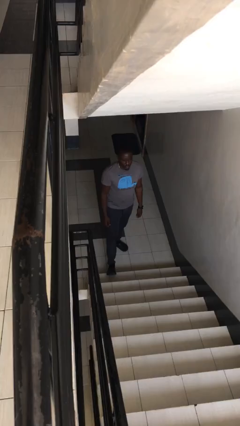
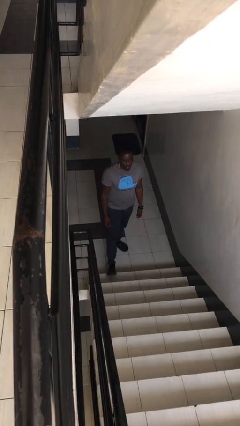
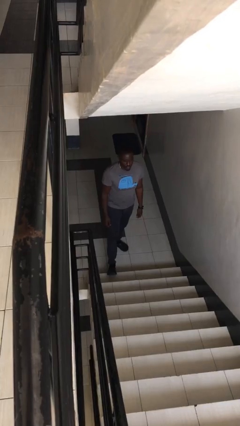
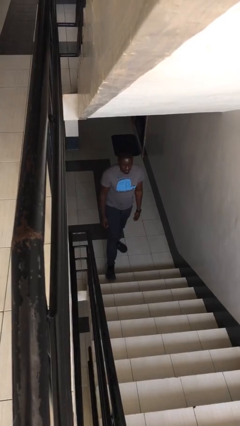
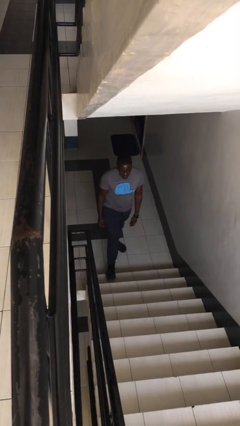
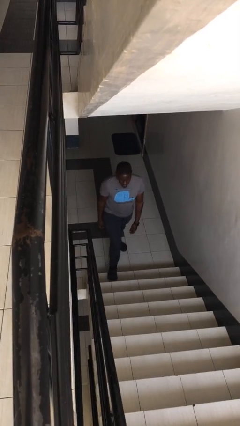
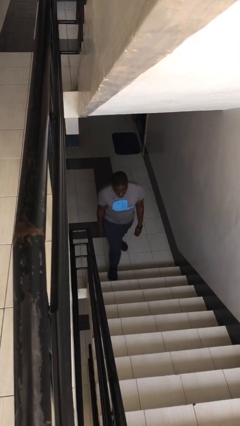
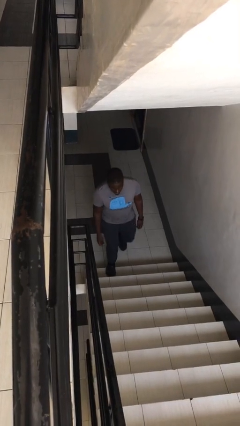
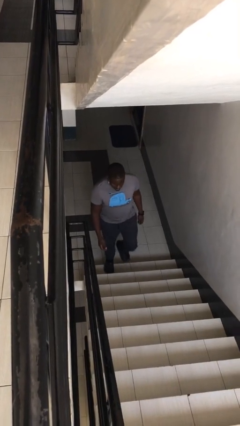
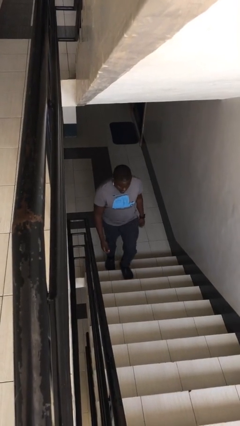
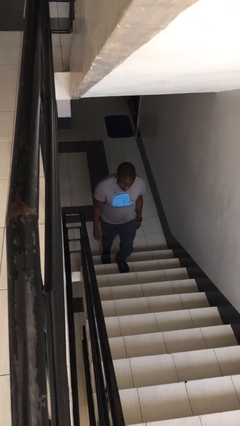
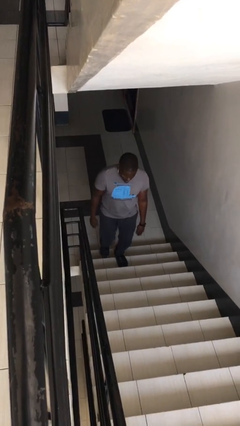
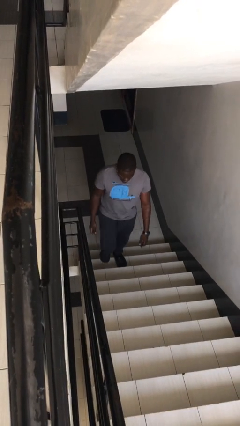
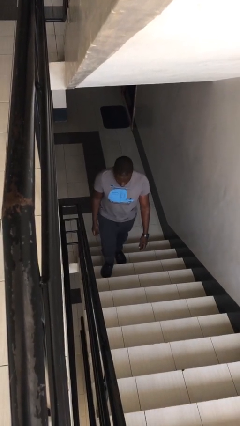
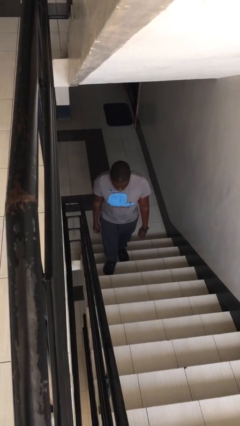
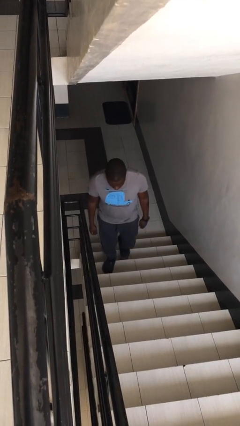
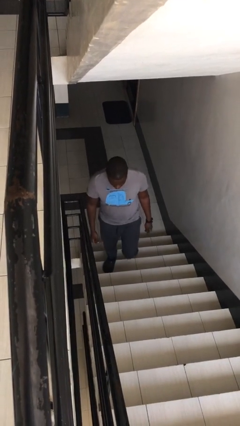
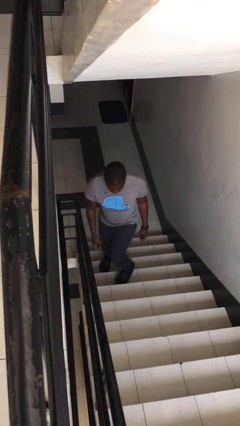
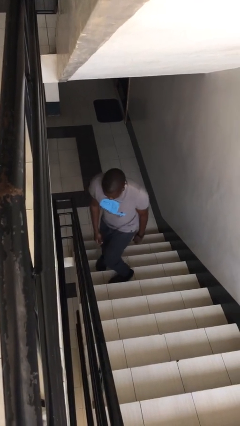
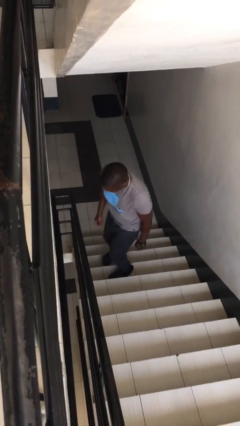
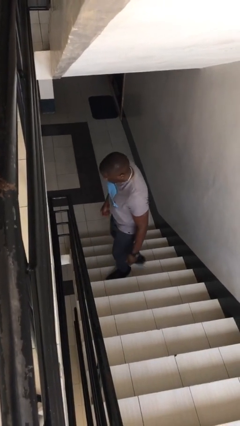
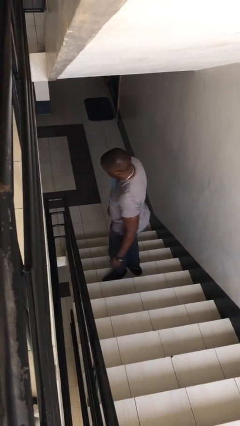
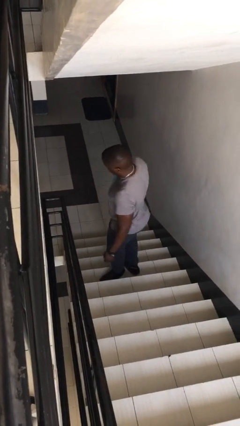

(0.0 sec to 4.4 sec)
person climbs up stairs

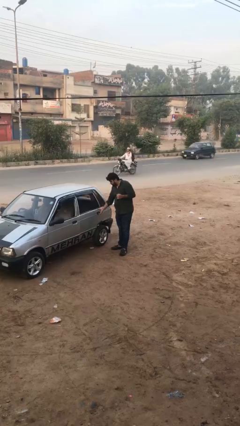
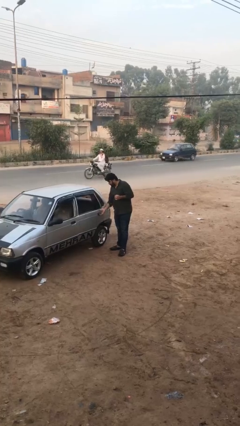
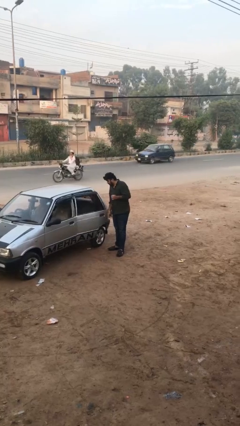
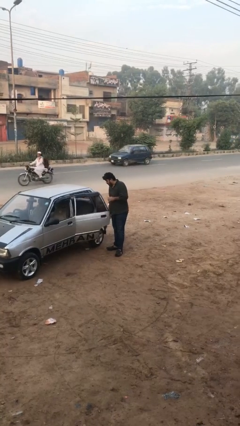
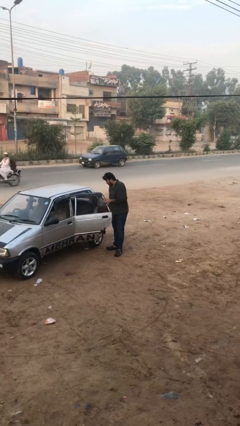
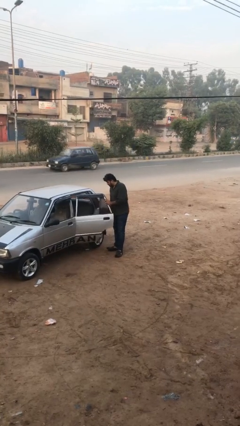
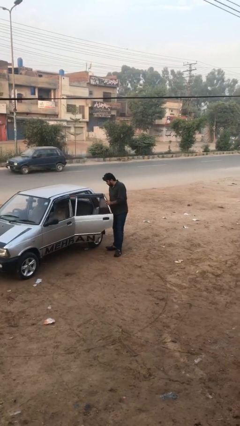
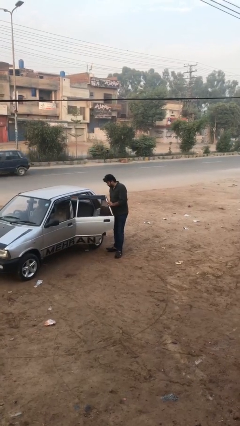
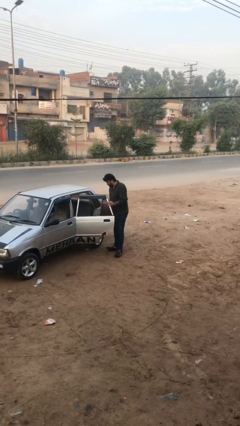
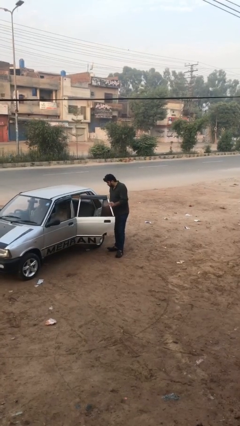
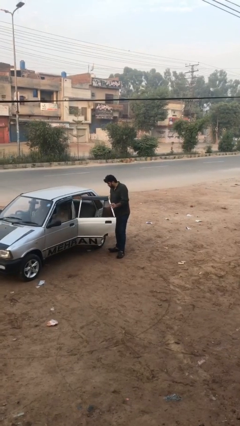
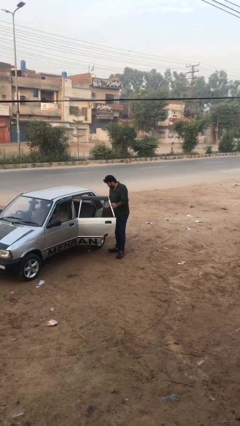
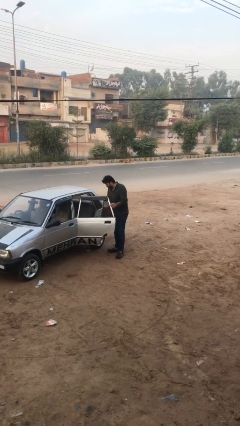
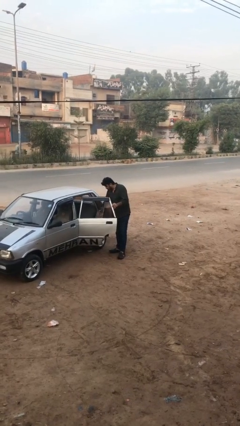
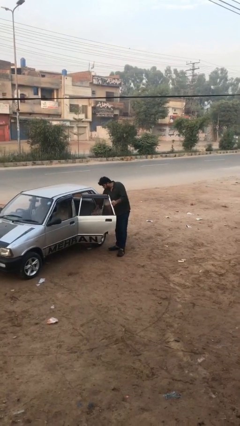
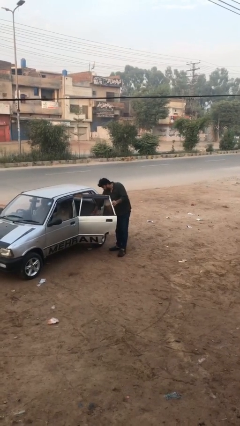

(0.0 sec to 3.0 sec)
person opens car door

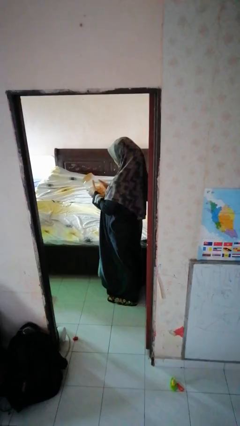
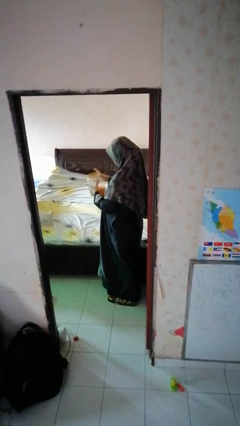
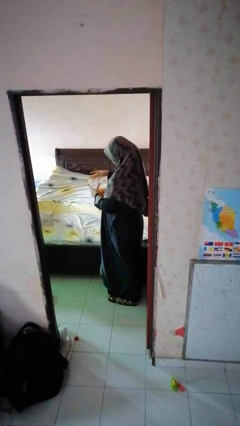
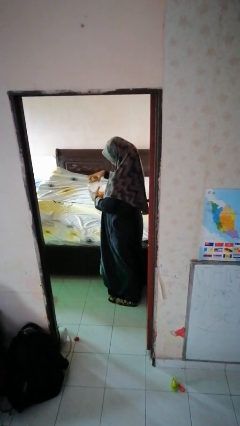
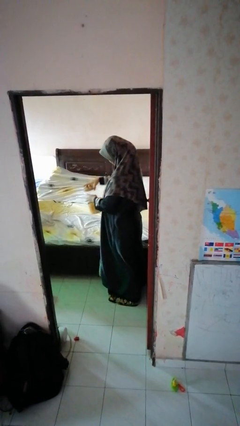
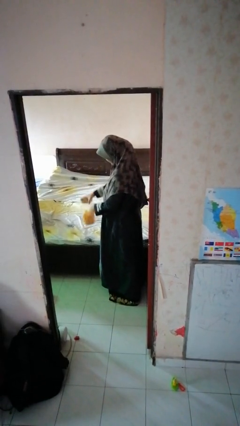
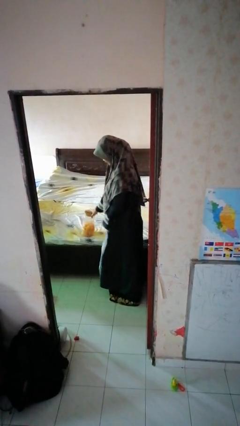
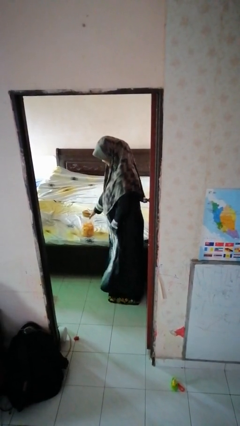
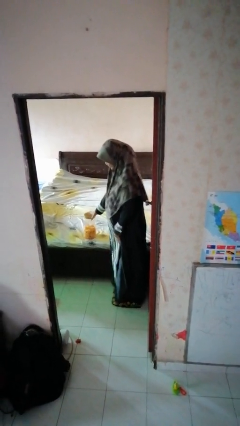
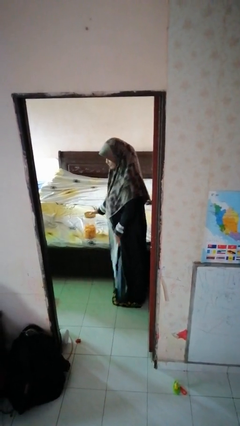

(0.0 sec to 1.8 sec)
person puts down object on bed

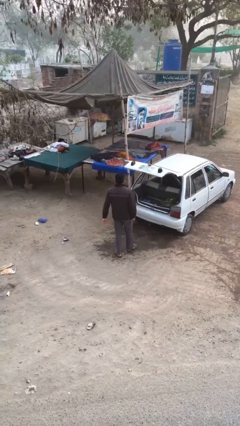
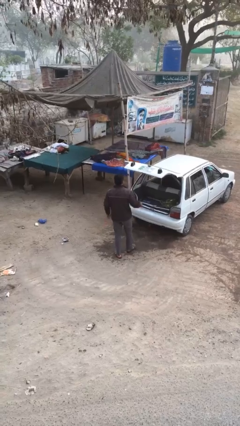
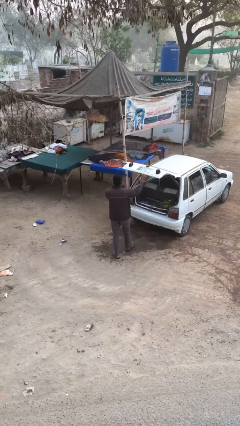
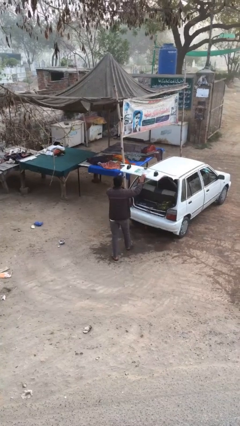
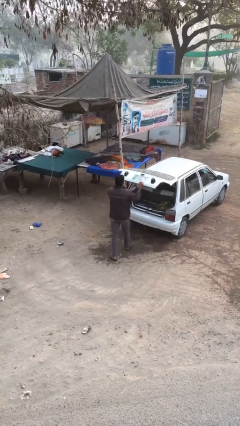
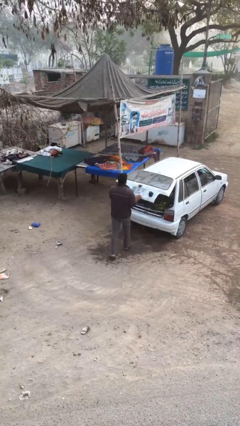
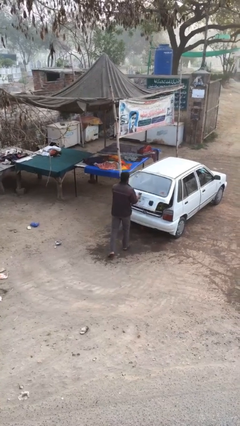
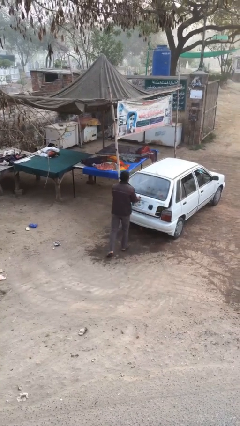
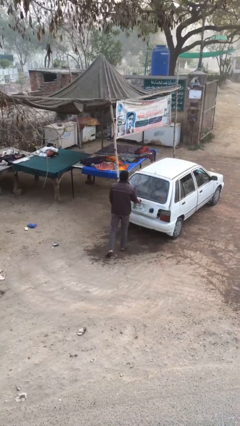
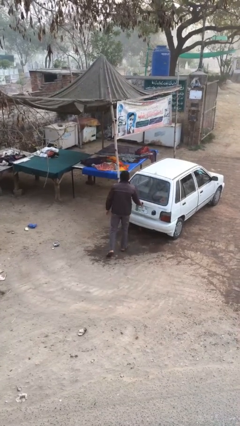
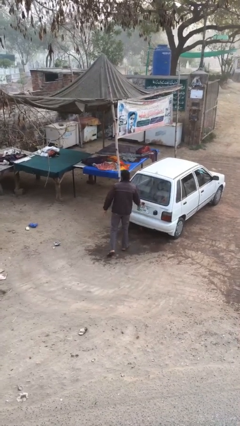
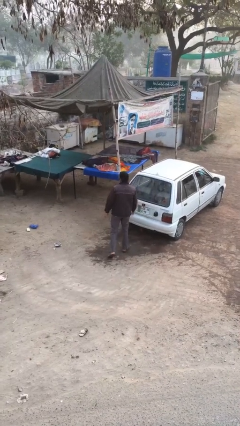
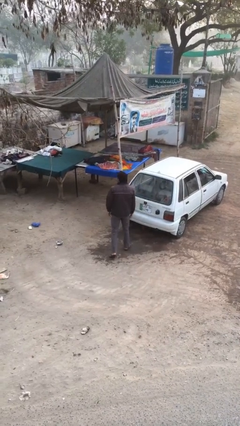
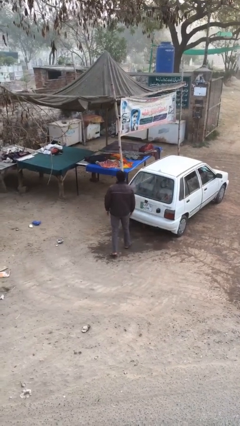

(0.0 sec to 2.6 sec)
person closes car trunk

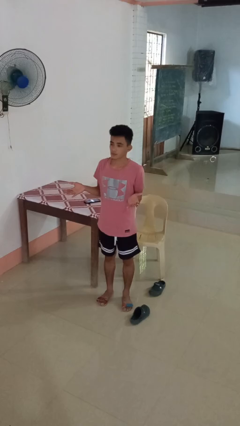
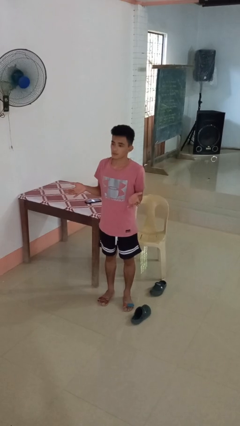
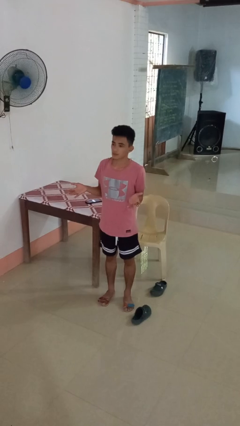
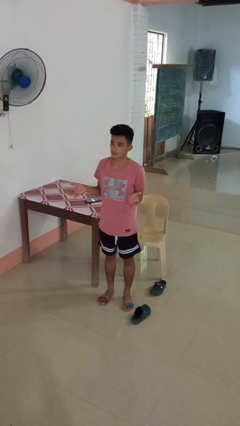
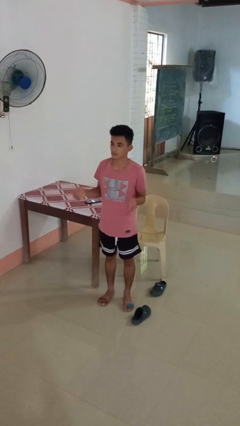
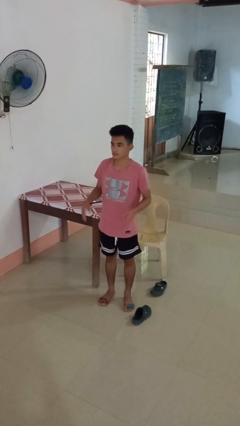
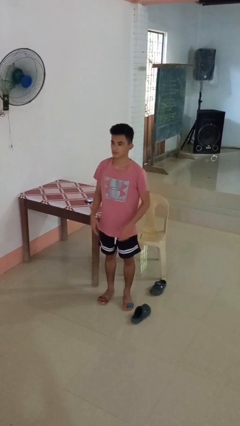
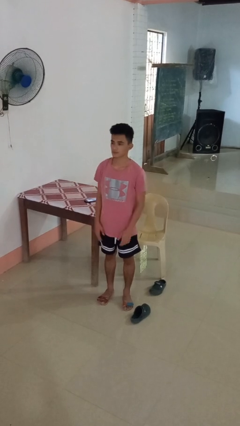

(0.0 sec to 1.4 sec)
person shrugs

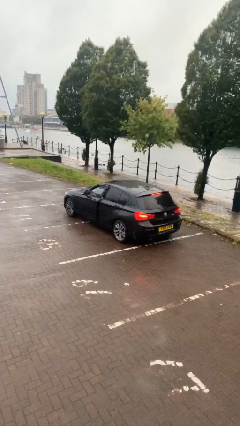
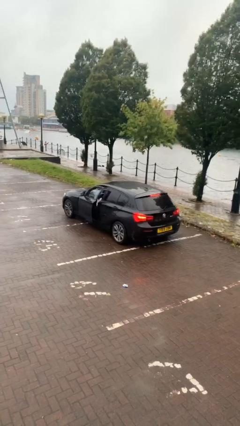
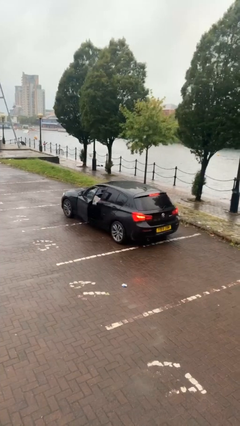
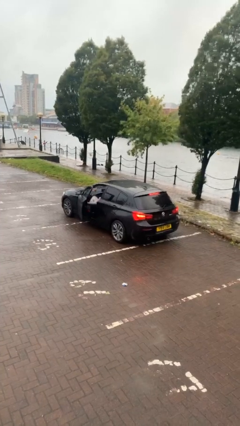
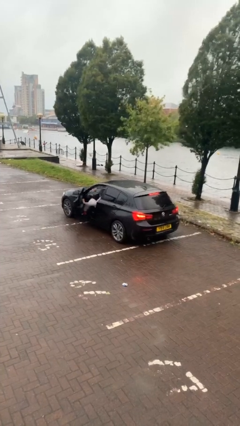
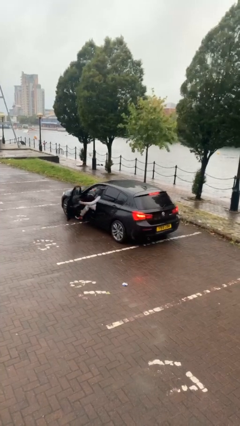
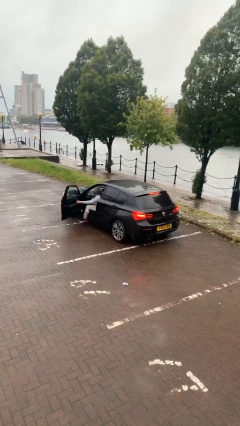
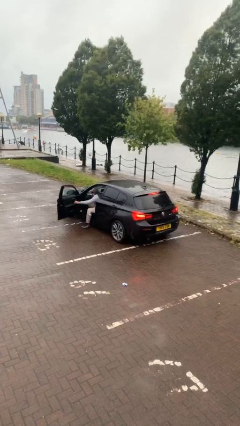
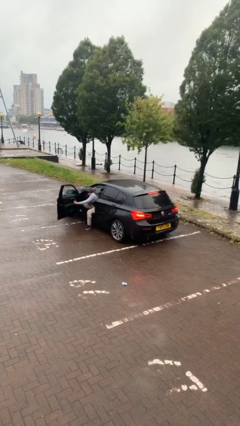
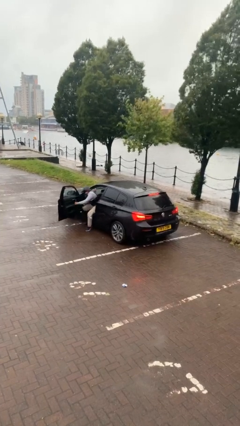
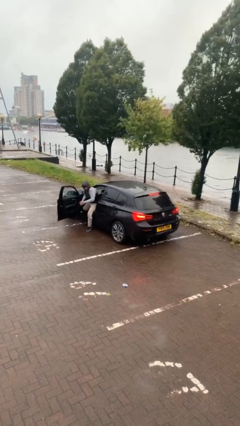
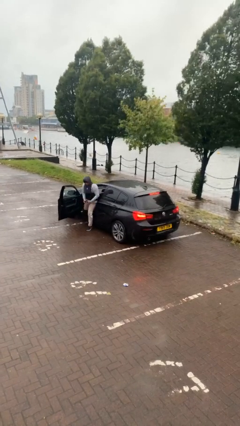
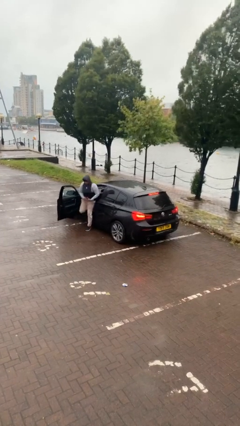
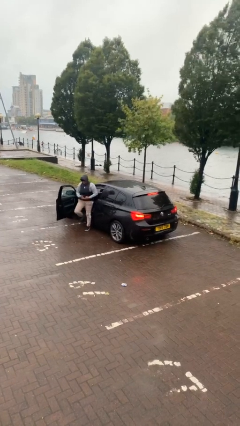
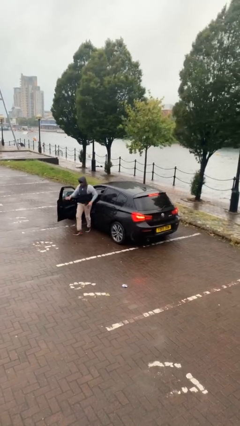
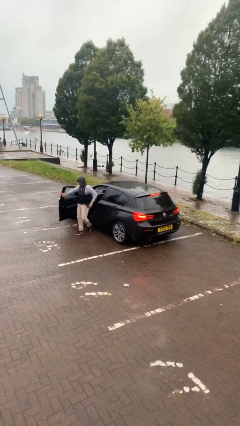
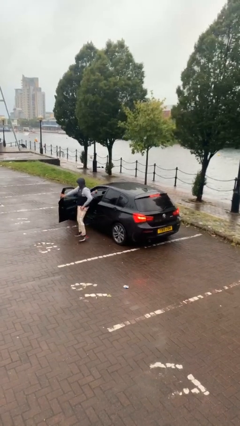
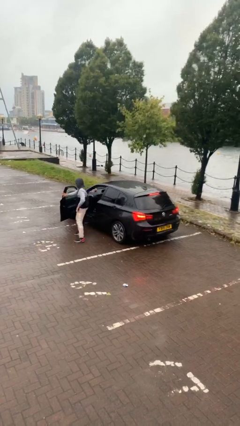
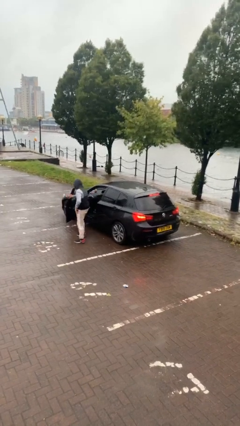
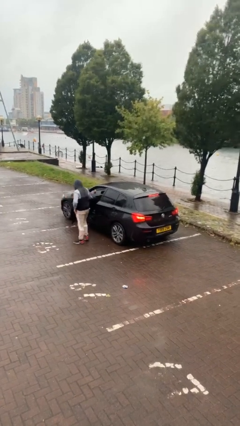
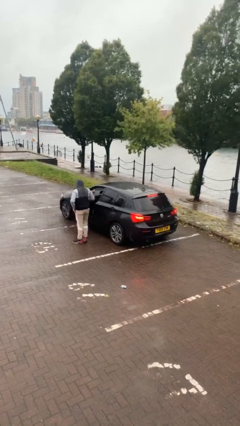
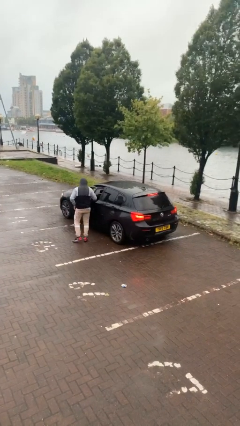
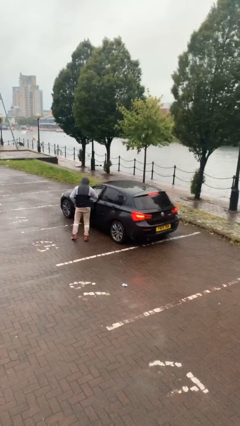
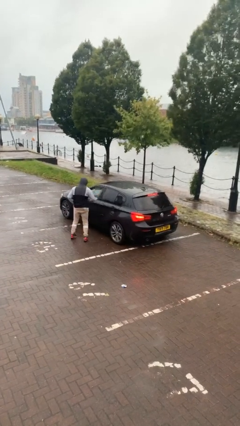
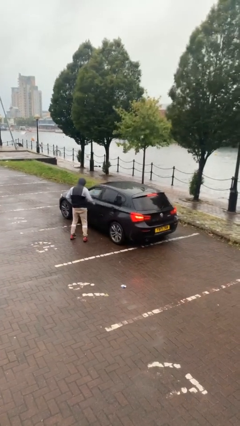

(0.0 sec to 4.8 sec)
car drops off person
